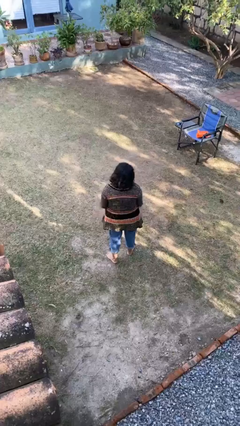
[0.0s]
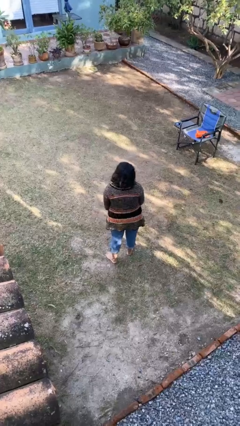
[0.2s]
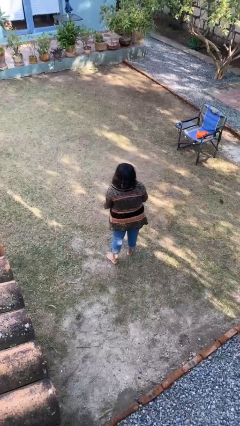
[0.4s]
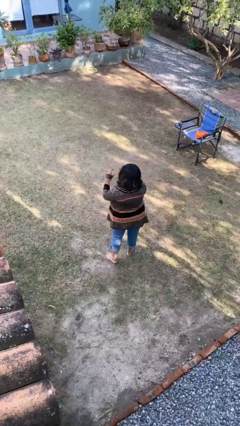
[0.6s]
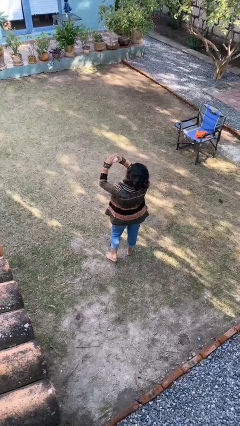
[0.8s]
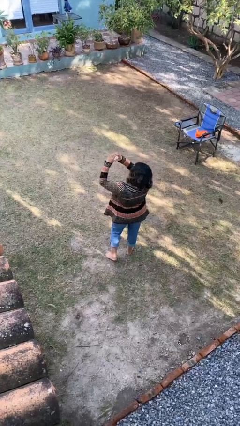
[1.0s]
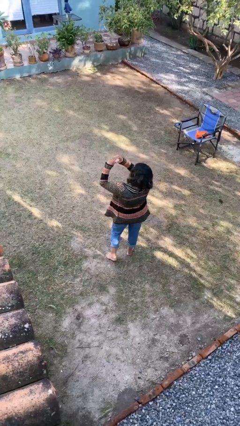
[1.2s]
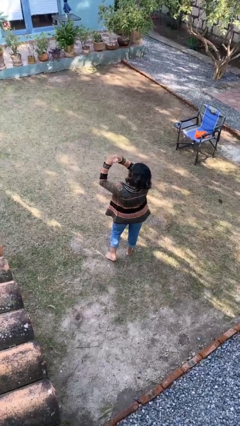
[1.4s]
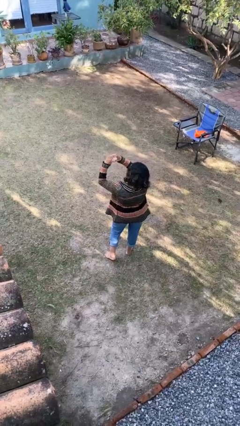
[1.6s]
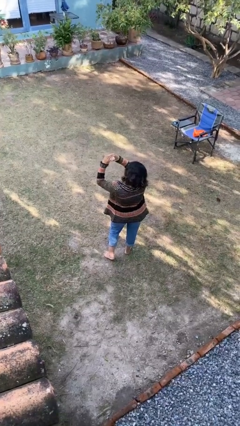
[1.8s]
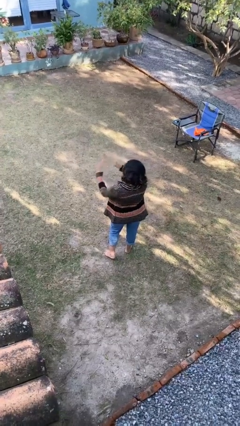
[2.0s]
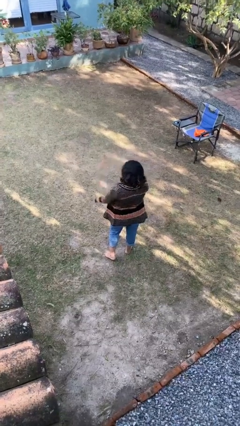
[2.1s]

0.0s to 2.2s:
person gestures heart

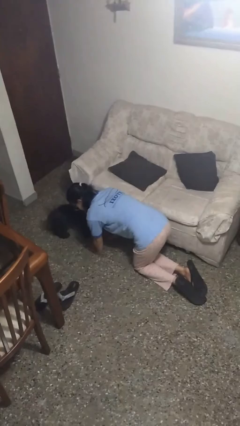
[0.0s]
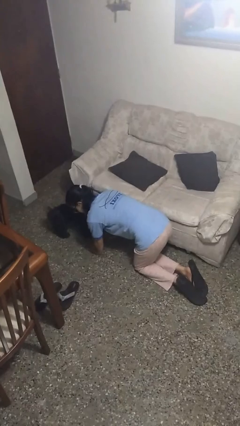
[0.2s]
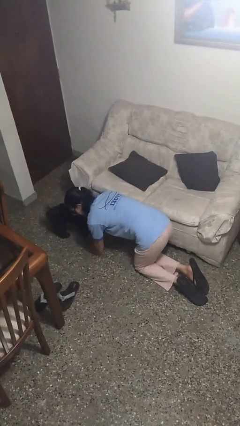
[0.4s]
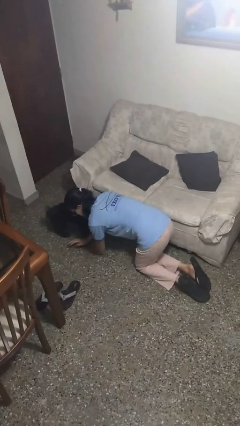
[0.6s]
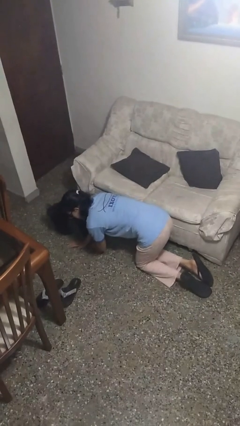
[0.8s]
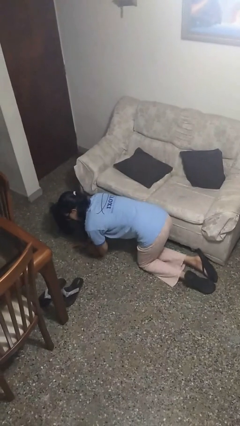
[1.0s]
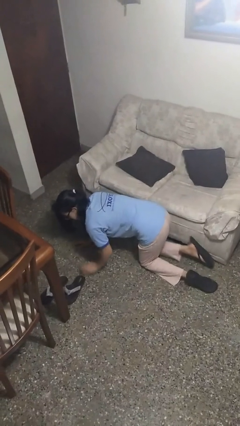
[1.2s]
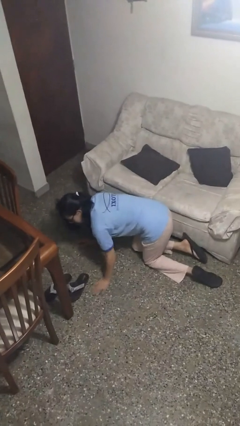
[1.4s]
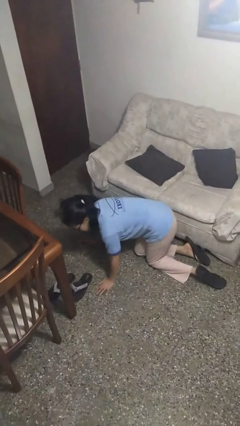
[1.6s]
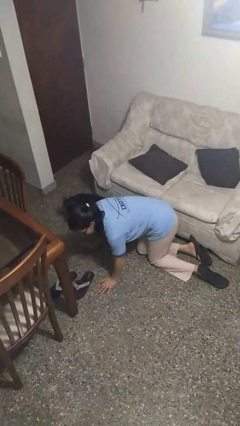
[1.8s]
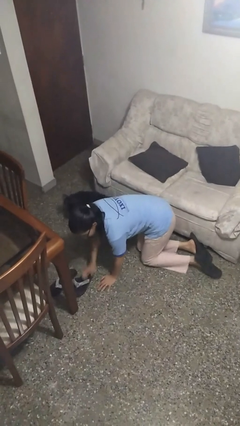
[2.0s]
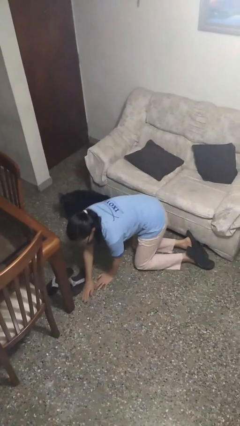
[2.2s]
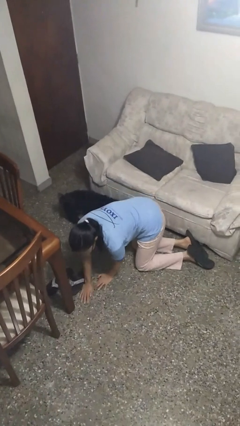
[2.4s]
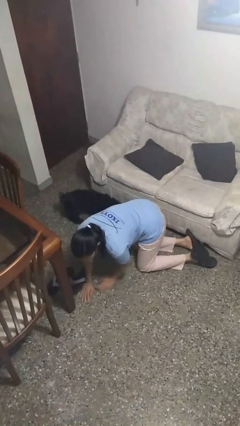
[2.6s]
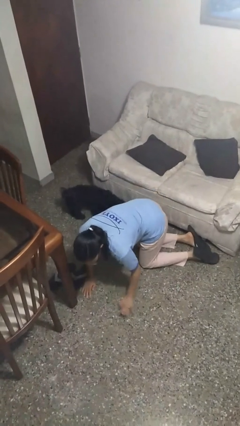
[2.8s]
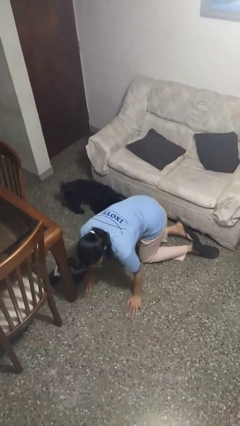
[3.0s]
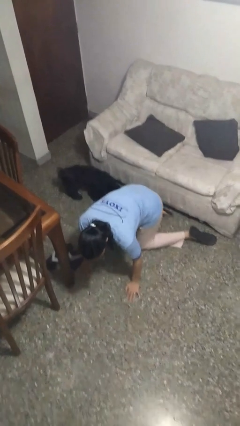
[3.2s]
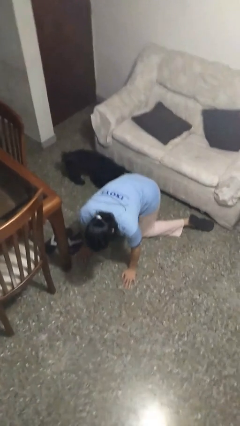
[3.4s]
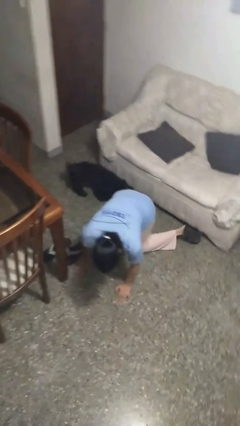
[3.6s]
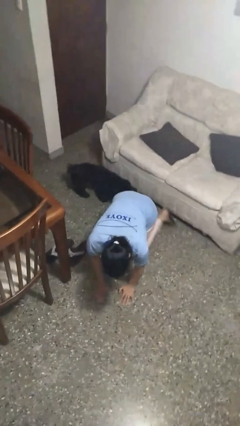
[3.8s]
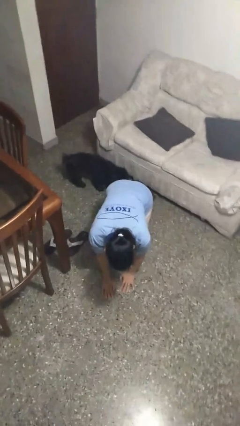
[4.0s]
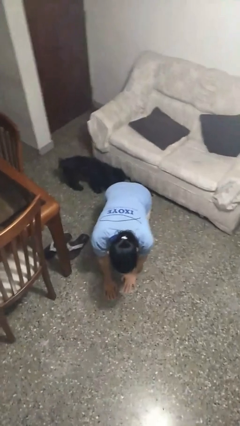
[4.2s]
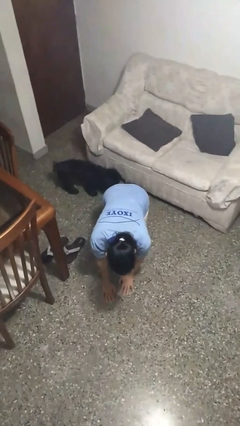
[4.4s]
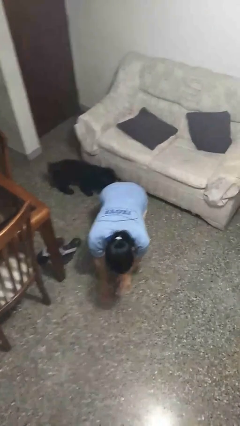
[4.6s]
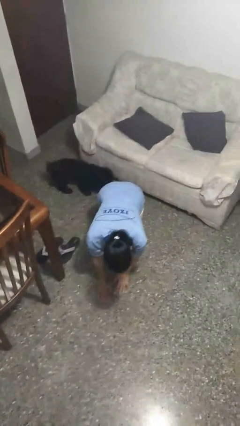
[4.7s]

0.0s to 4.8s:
person crawls

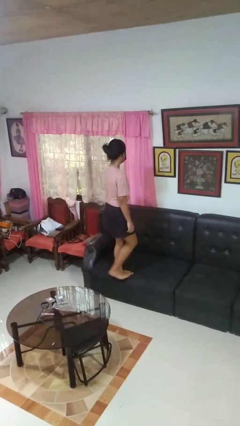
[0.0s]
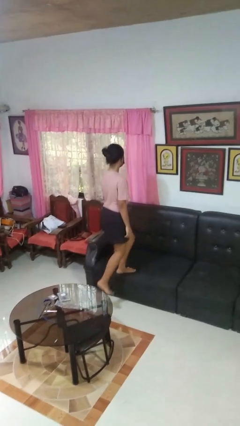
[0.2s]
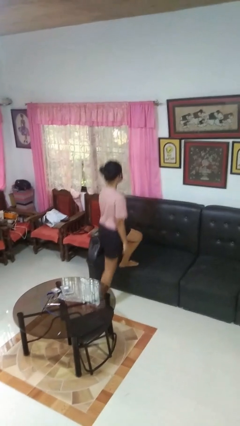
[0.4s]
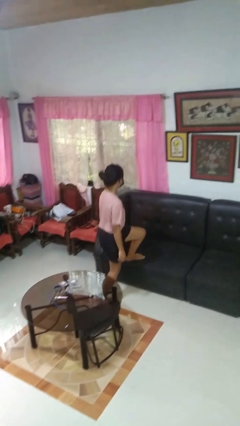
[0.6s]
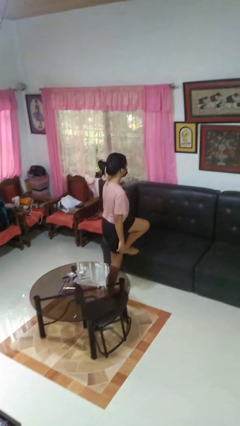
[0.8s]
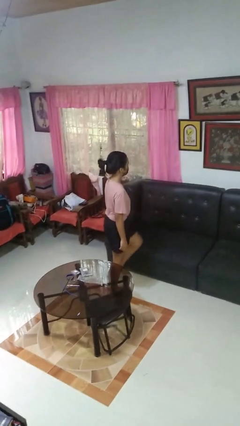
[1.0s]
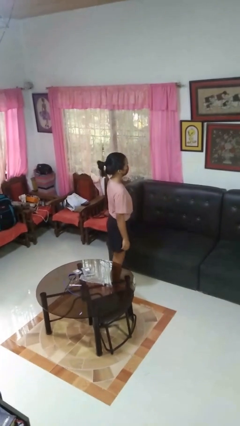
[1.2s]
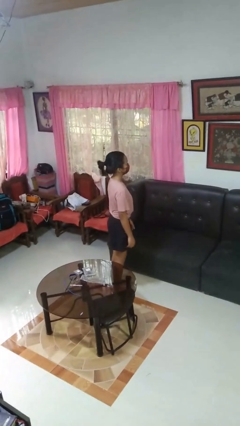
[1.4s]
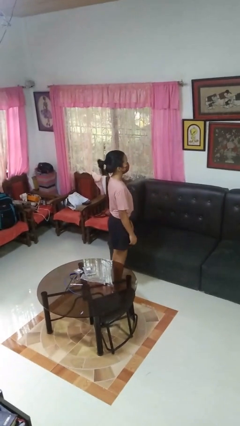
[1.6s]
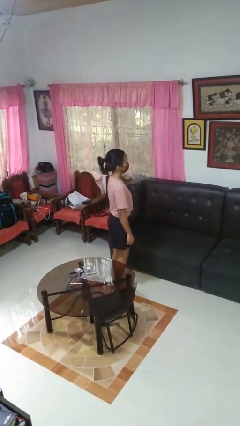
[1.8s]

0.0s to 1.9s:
person climbs off couch

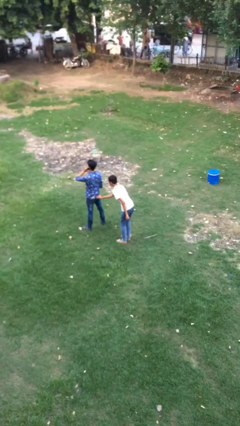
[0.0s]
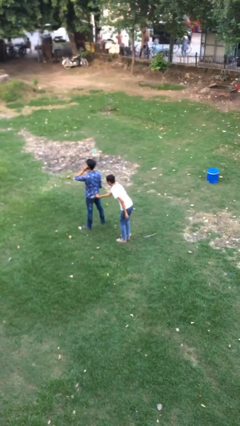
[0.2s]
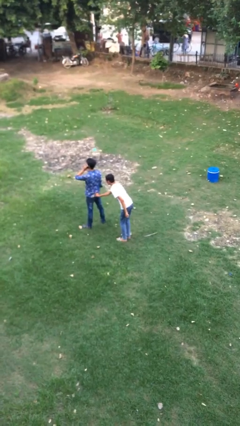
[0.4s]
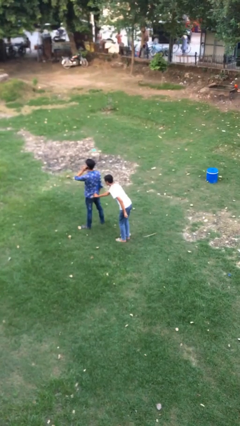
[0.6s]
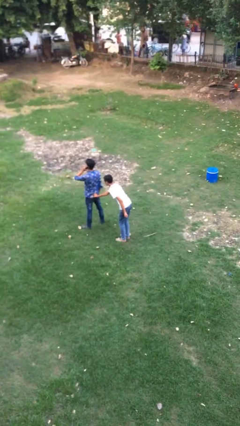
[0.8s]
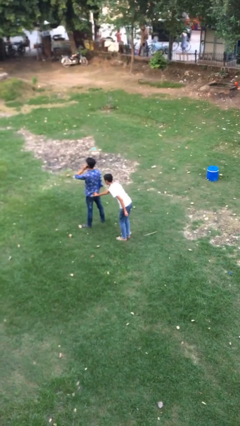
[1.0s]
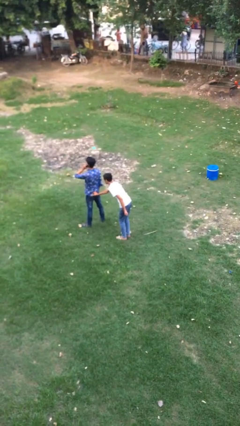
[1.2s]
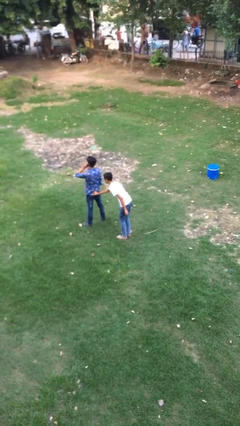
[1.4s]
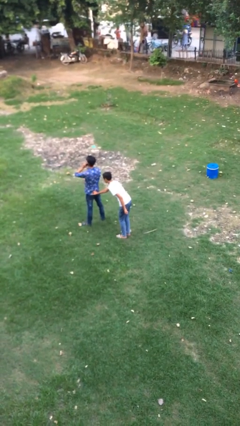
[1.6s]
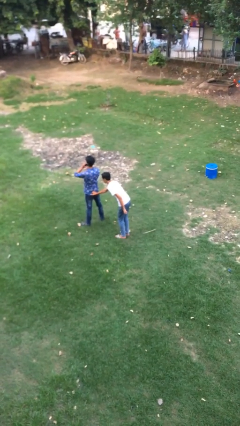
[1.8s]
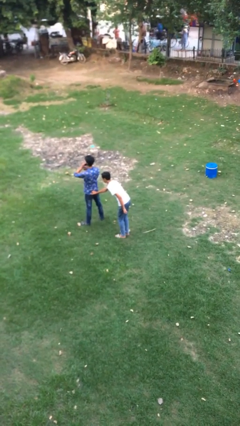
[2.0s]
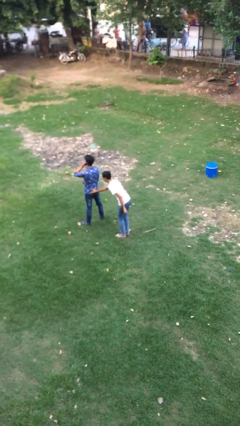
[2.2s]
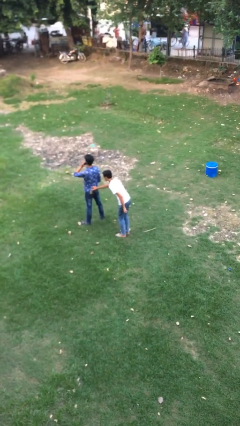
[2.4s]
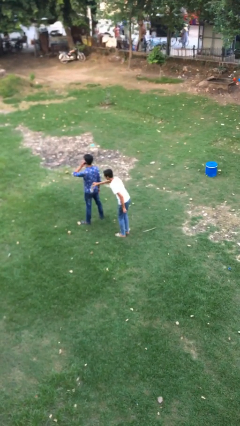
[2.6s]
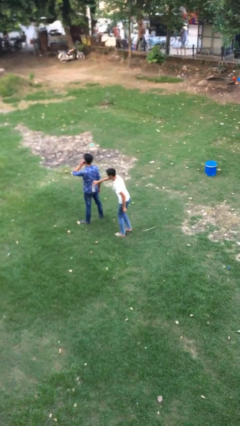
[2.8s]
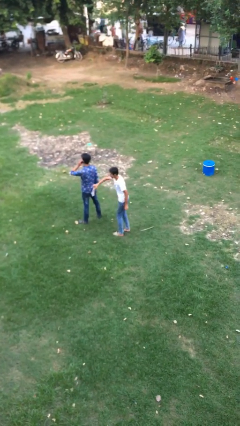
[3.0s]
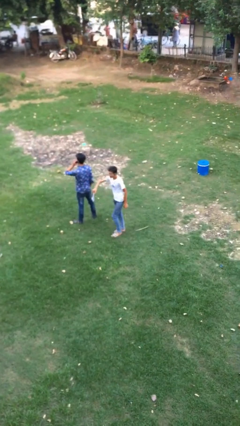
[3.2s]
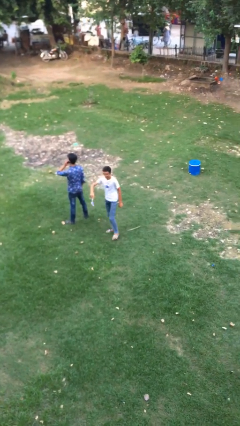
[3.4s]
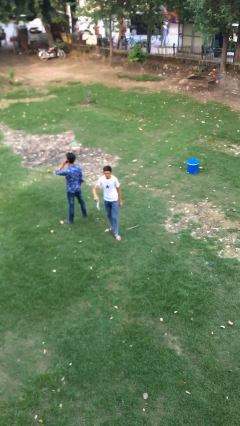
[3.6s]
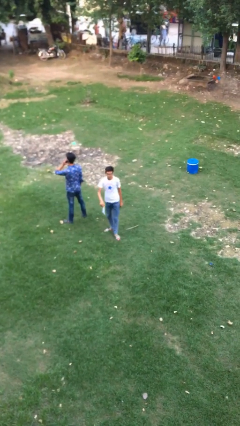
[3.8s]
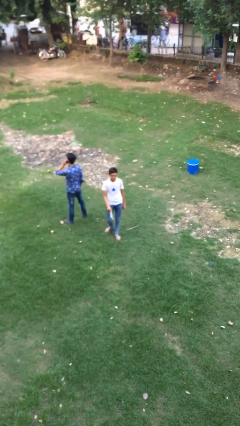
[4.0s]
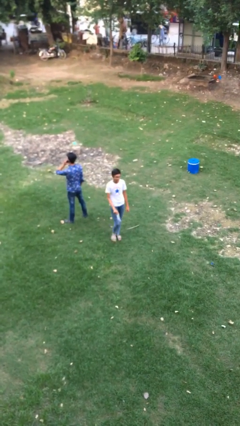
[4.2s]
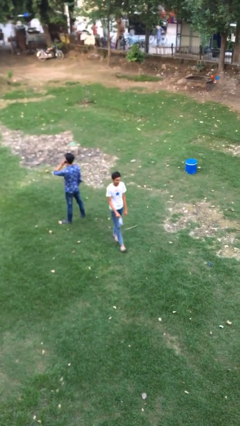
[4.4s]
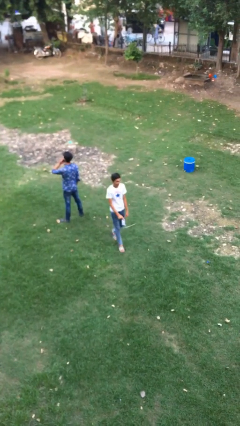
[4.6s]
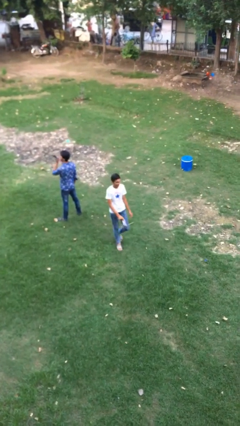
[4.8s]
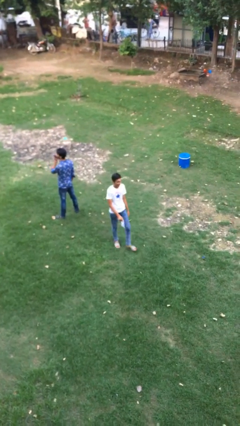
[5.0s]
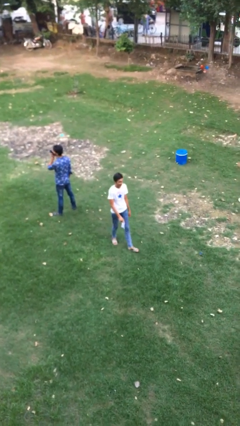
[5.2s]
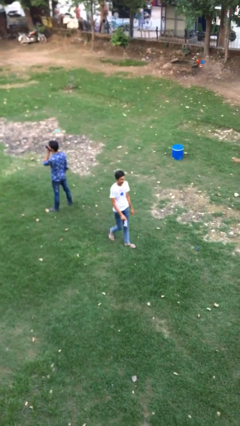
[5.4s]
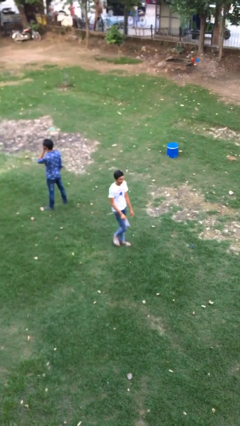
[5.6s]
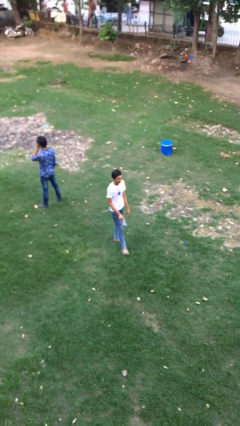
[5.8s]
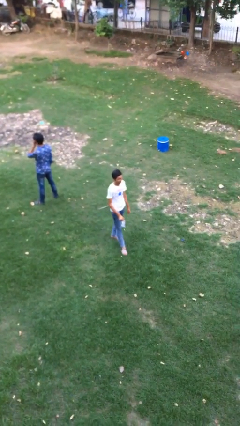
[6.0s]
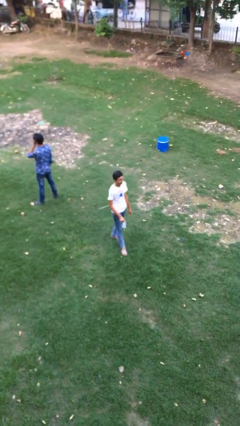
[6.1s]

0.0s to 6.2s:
person steals object from person

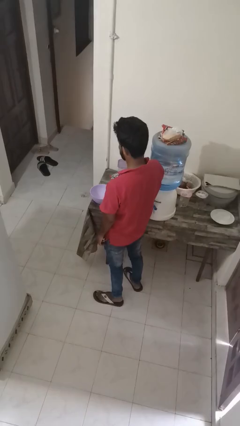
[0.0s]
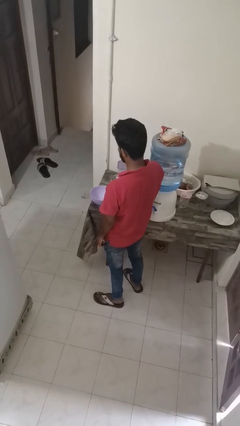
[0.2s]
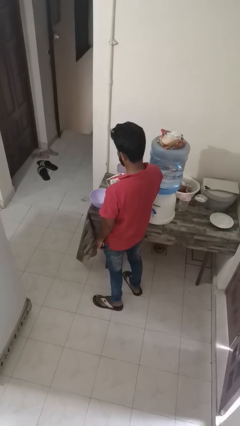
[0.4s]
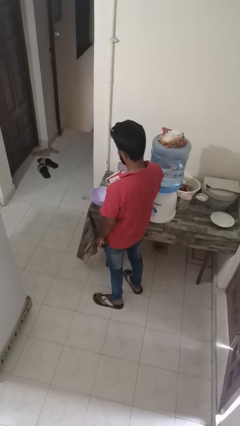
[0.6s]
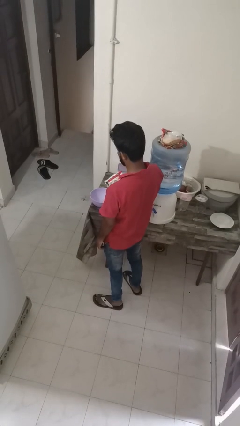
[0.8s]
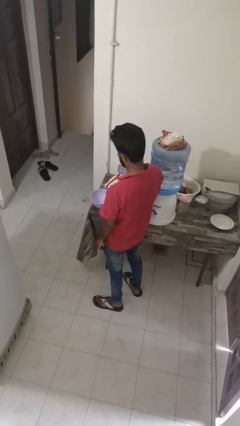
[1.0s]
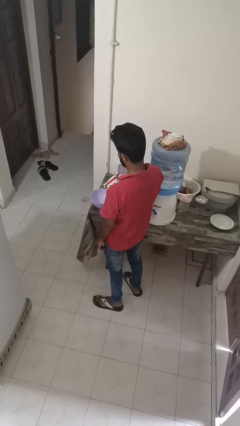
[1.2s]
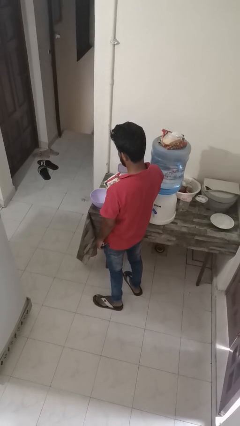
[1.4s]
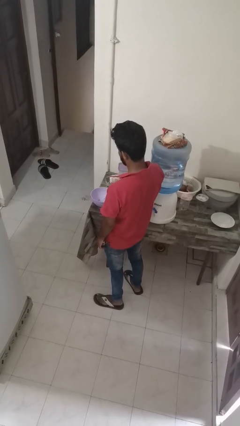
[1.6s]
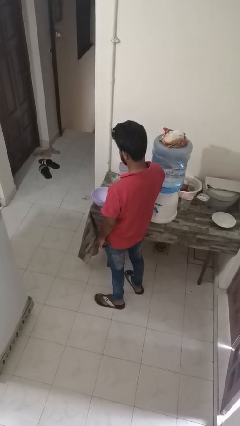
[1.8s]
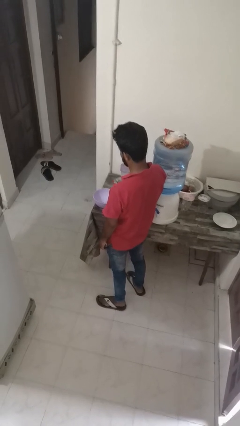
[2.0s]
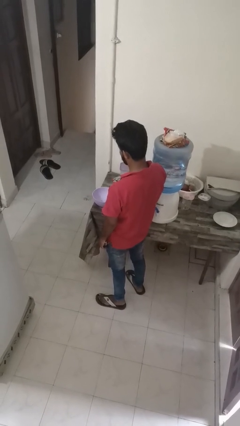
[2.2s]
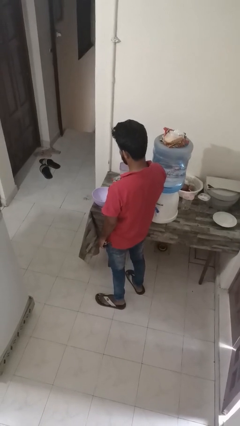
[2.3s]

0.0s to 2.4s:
person pours into bowl

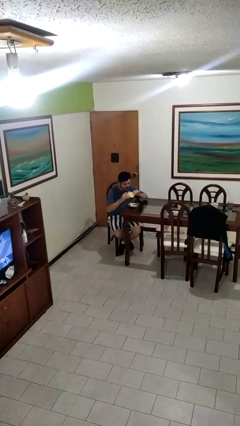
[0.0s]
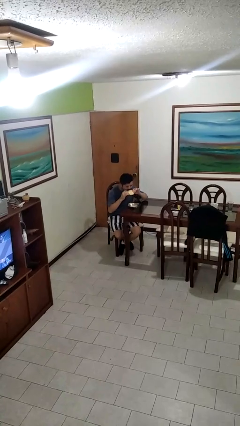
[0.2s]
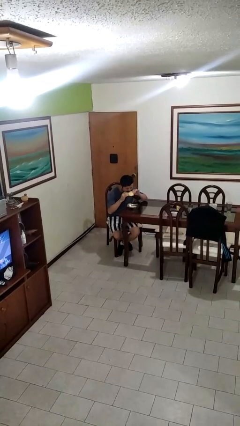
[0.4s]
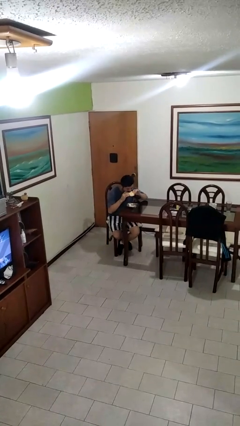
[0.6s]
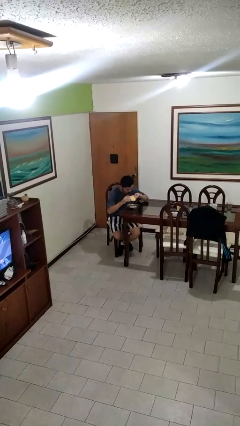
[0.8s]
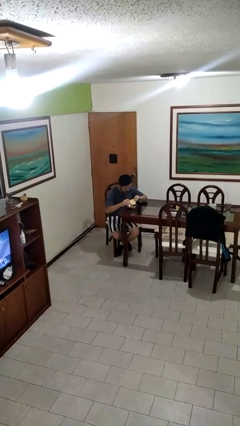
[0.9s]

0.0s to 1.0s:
person eats with hands
